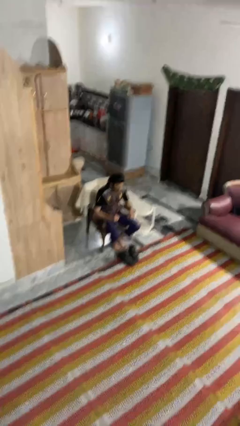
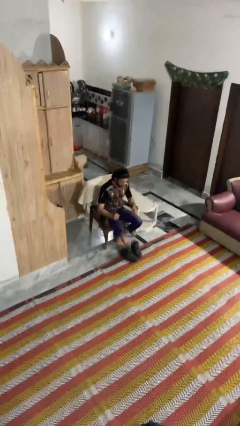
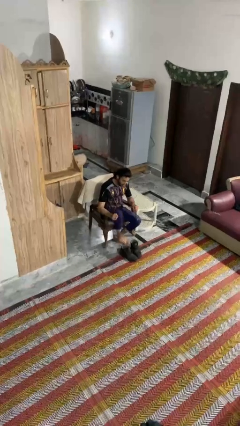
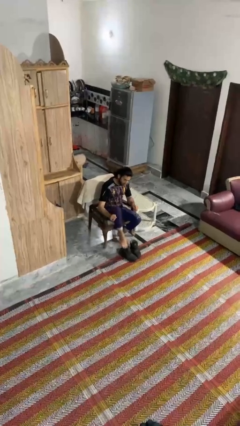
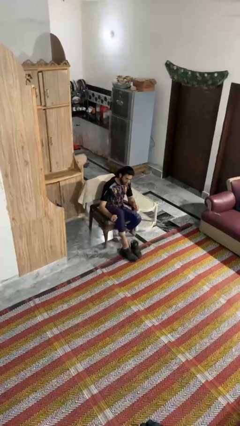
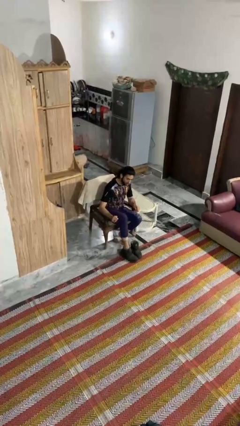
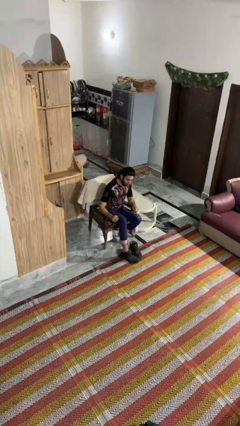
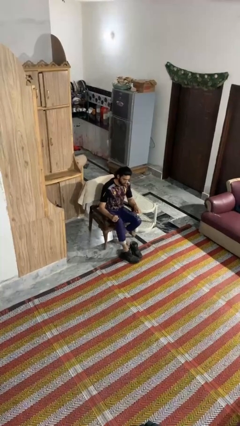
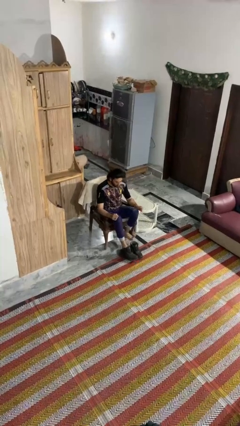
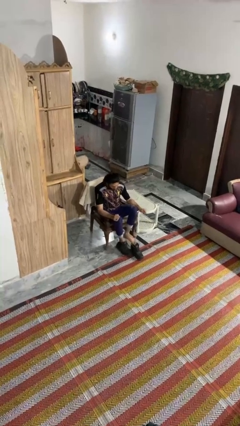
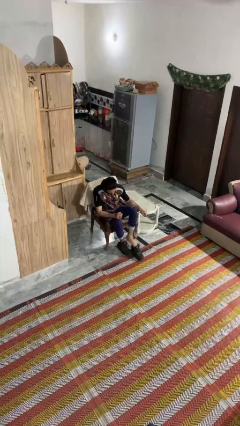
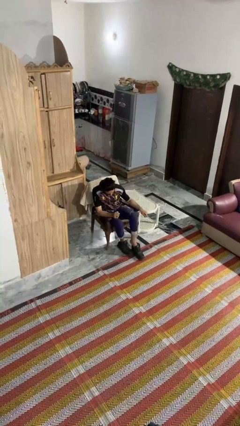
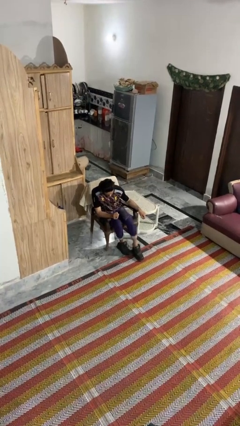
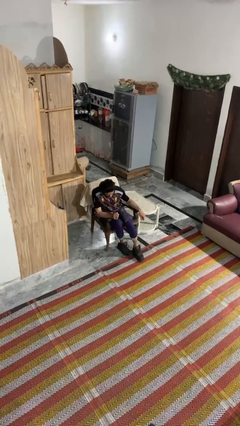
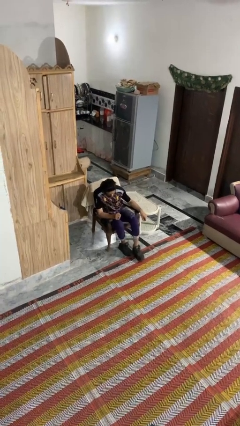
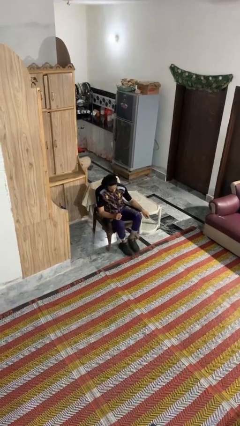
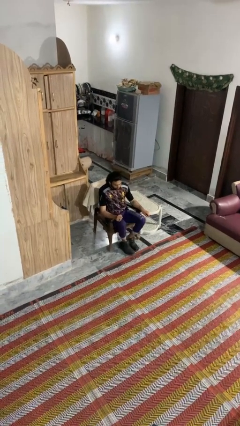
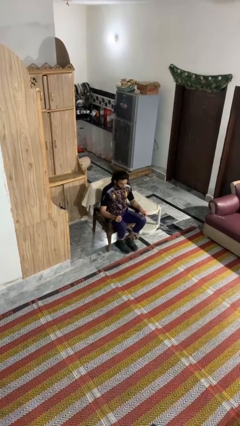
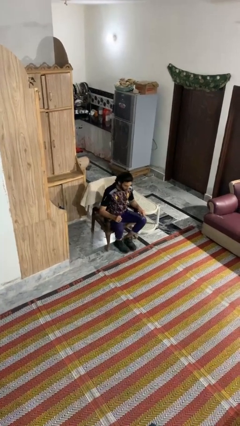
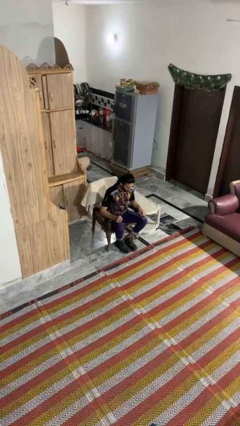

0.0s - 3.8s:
person puts on boots

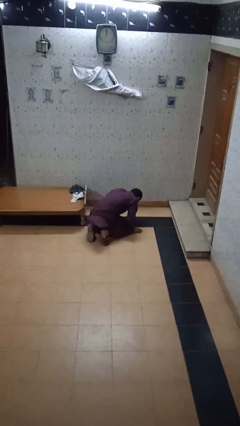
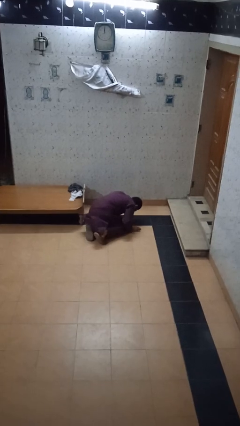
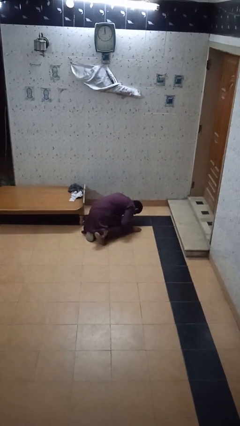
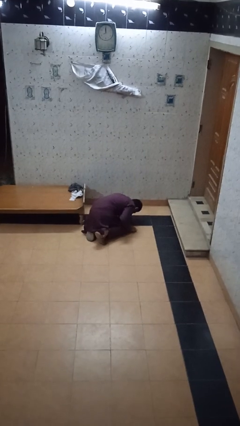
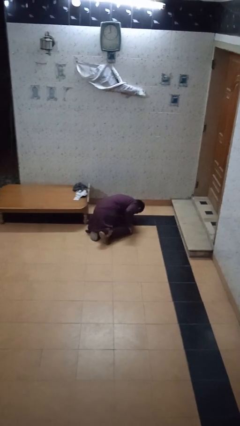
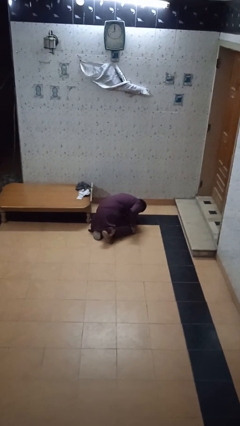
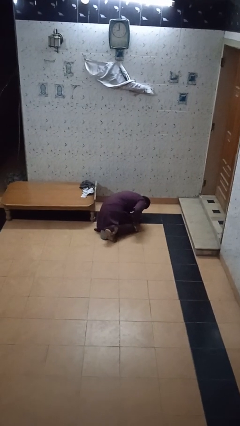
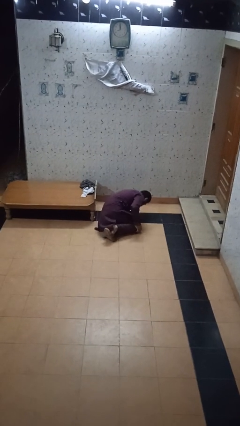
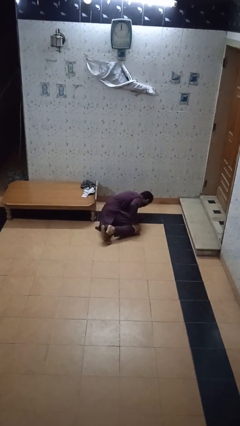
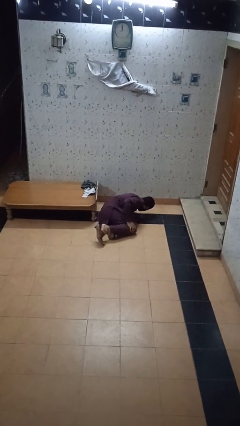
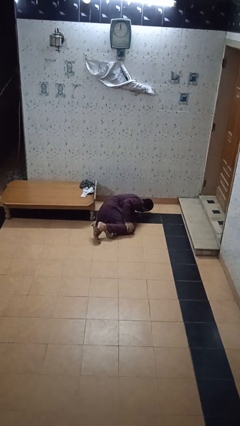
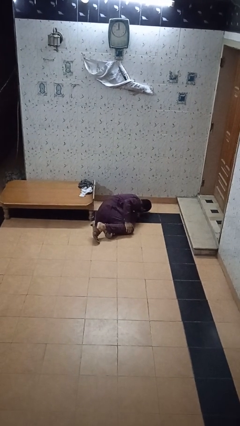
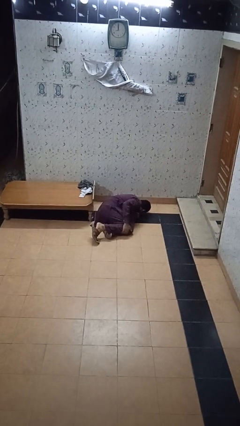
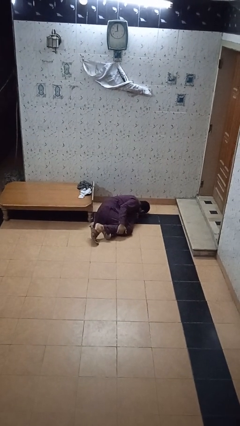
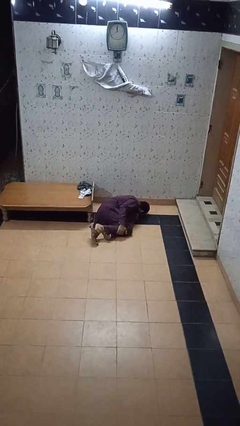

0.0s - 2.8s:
person lies down on floor

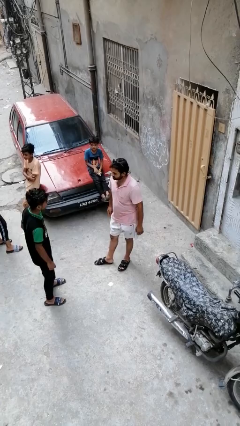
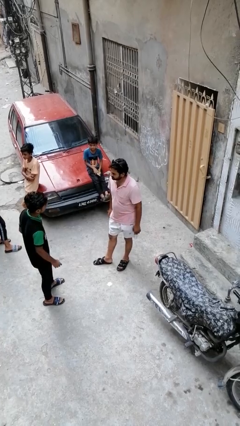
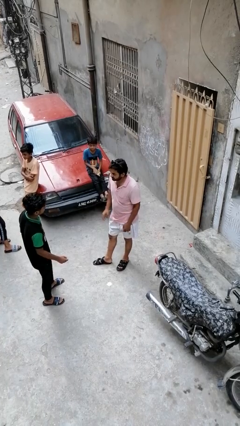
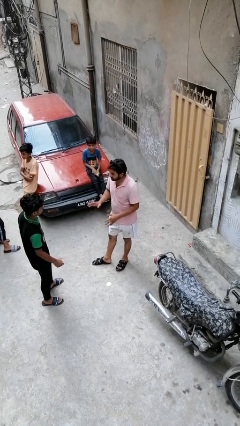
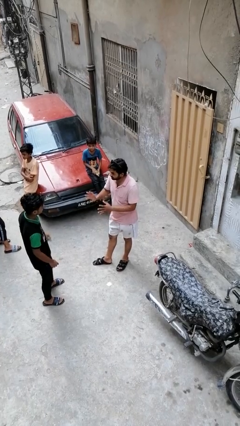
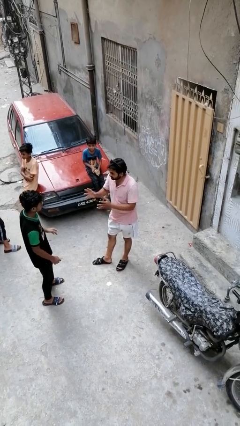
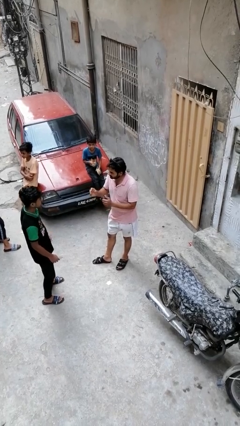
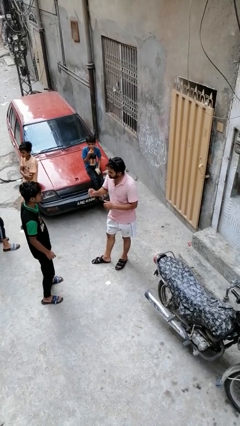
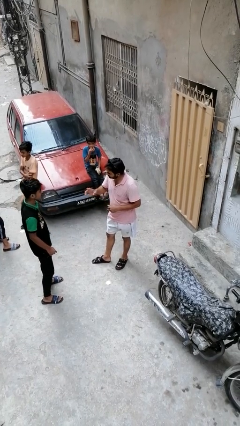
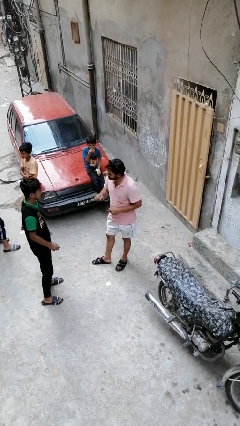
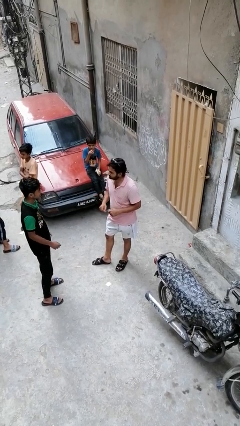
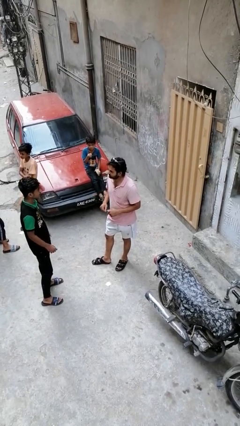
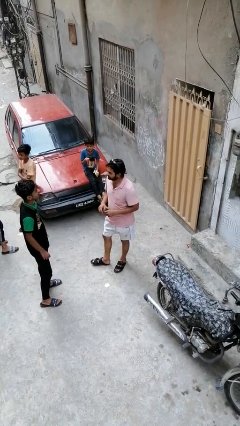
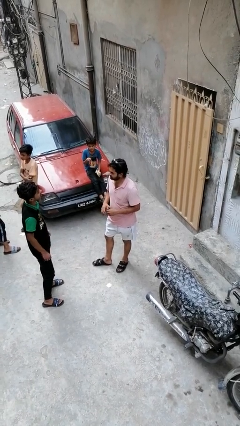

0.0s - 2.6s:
person talks to person

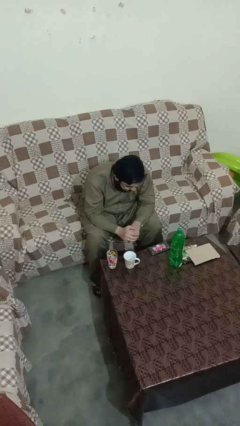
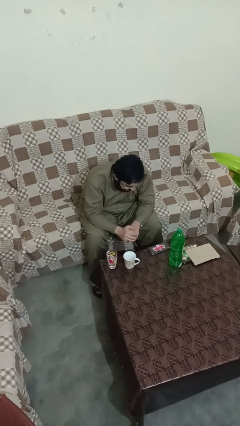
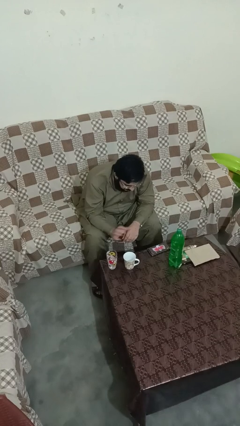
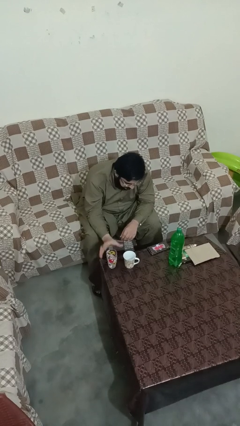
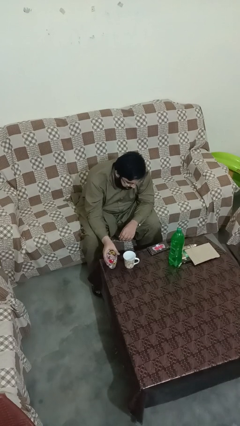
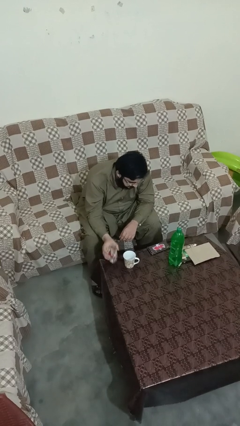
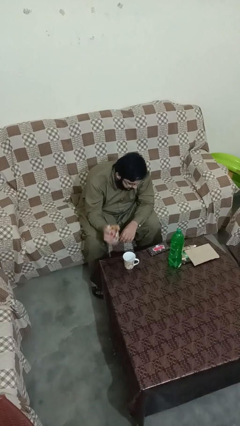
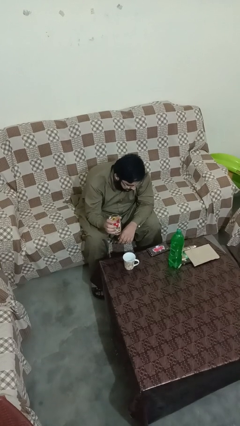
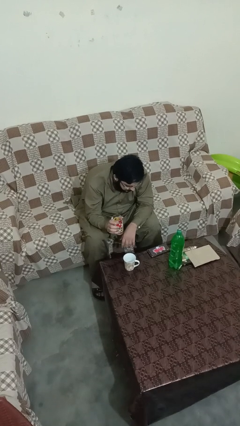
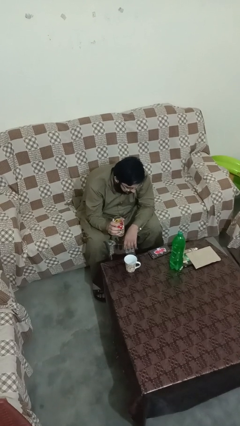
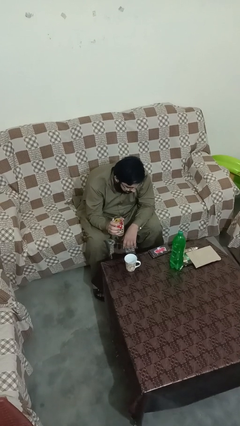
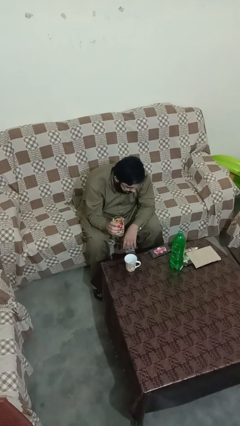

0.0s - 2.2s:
person picks up object from table

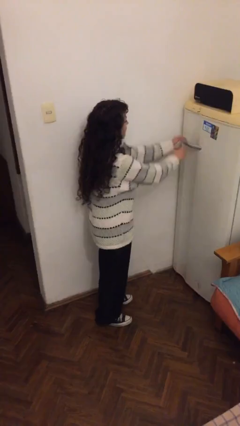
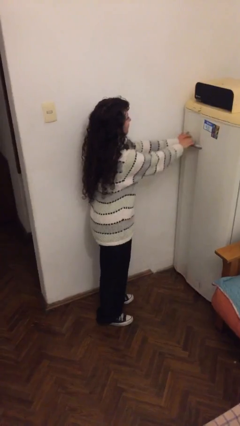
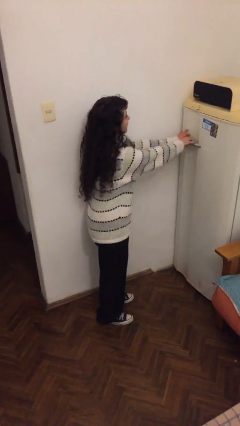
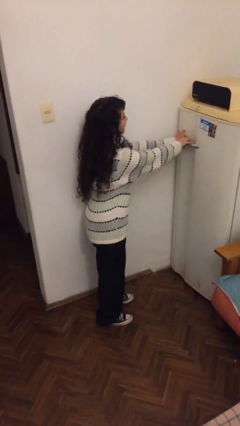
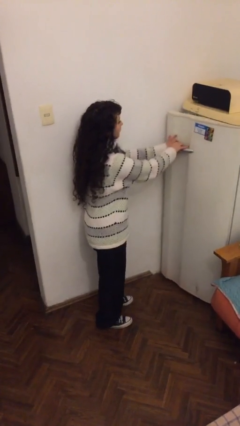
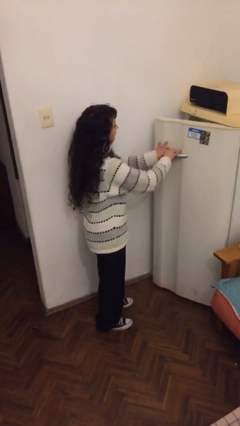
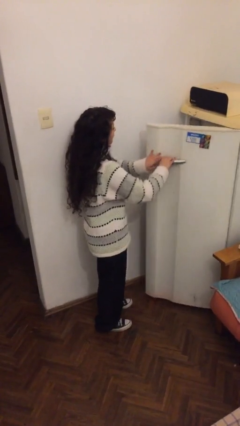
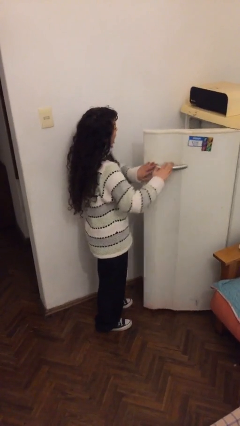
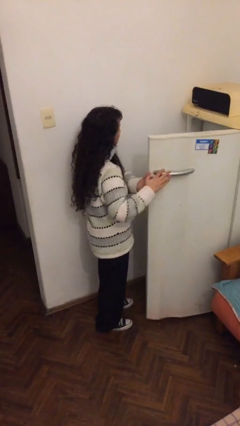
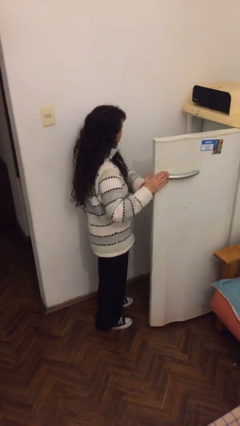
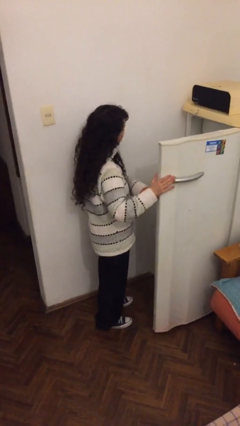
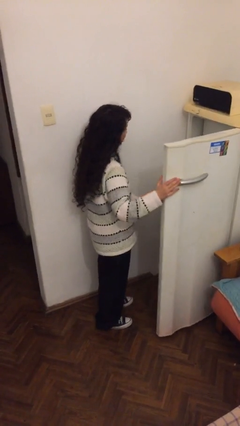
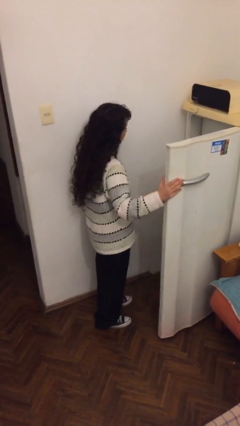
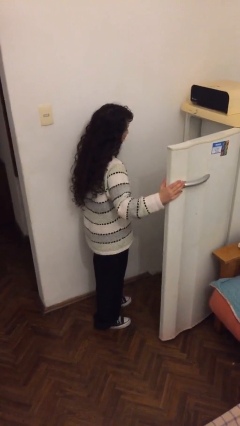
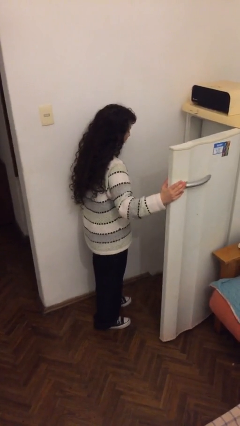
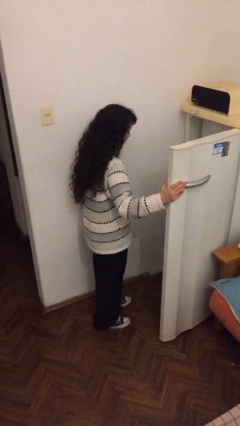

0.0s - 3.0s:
person opens refrigerator

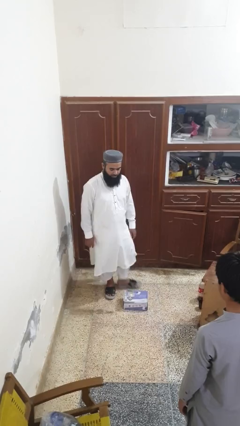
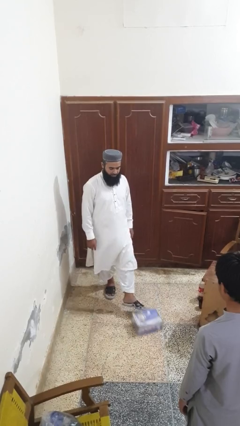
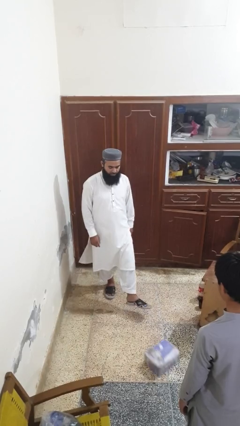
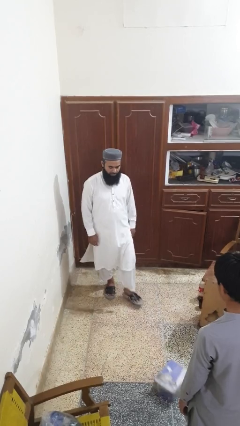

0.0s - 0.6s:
person kicks object to person

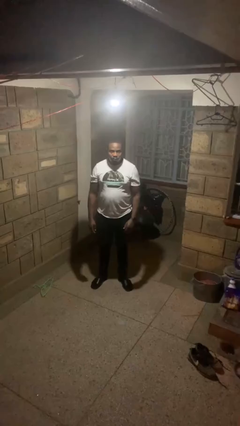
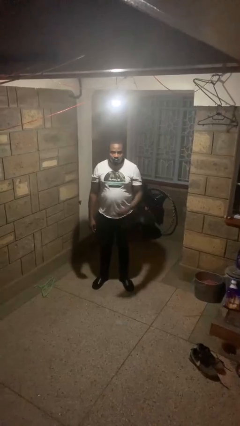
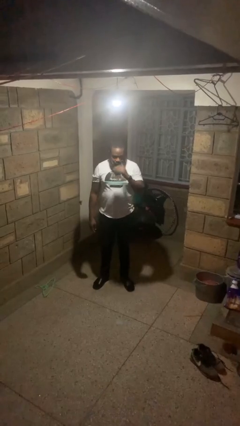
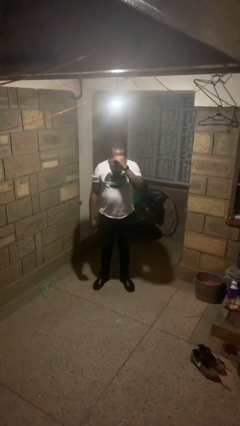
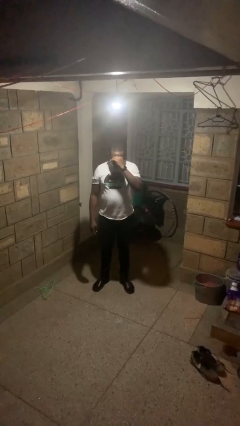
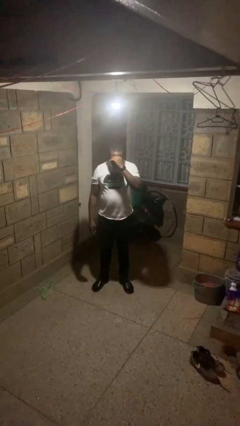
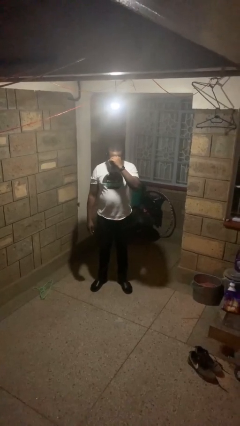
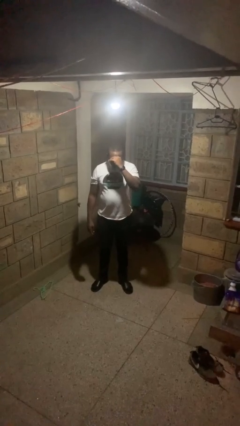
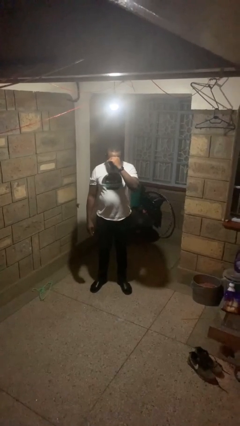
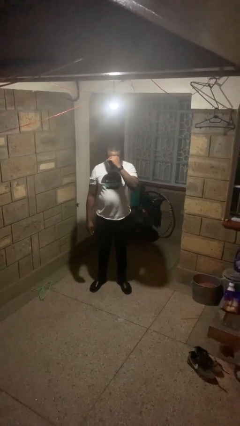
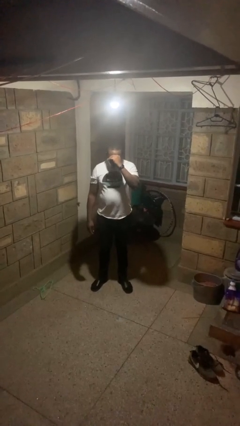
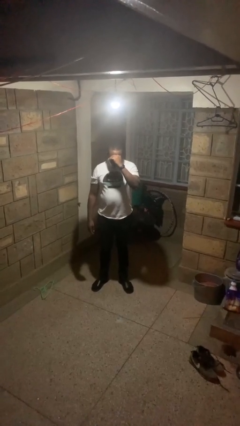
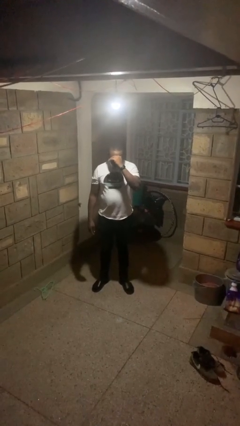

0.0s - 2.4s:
person shades eyes
